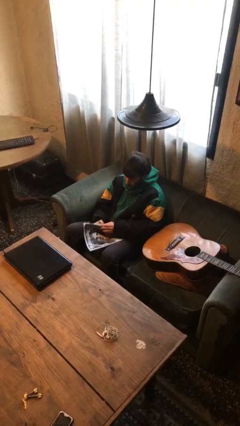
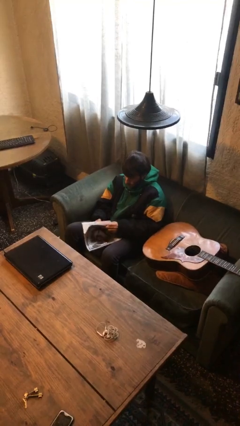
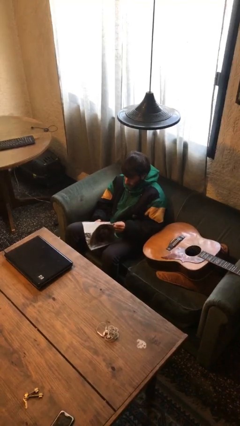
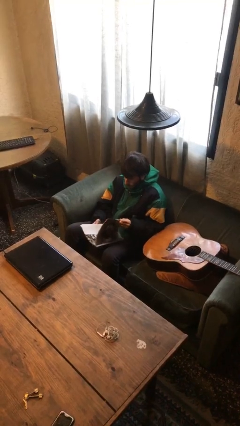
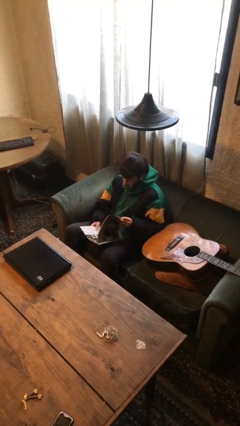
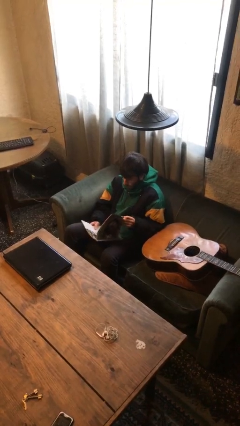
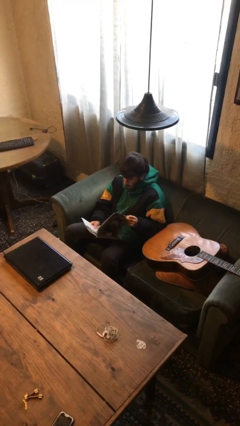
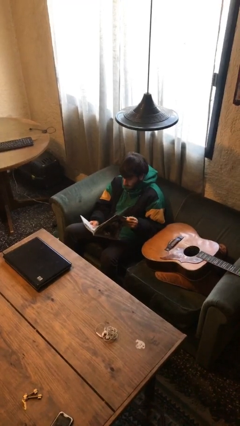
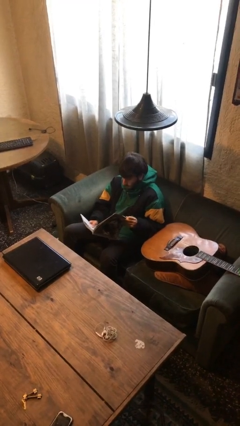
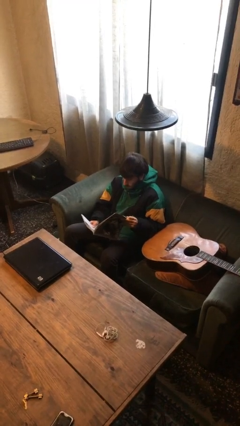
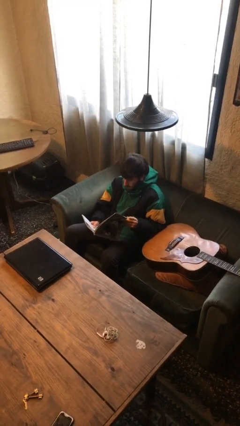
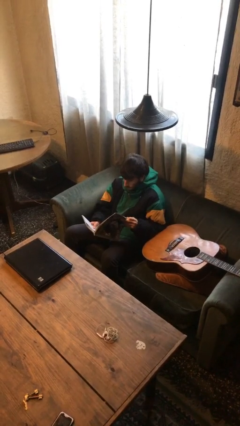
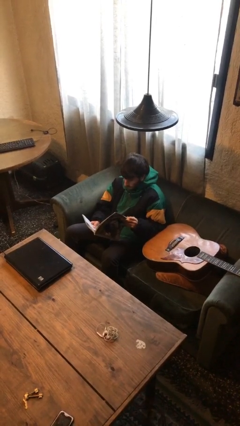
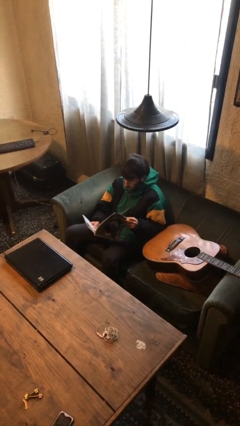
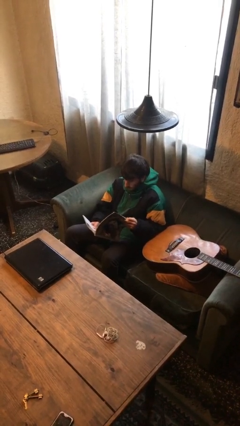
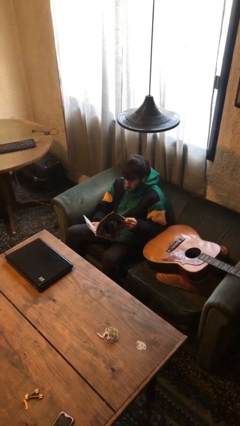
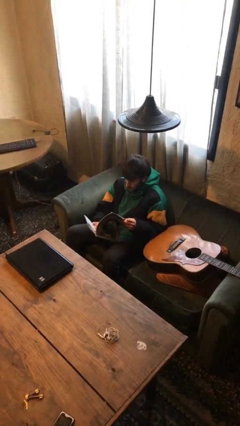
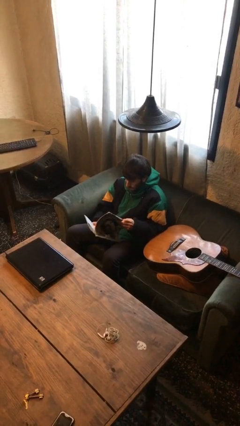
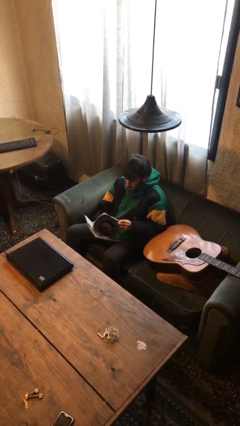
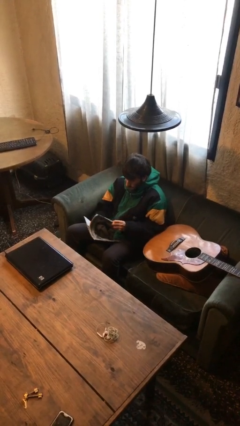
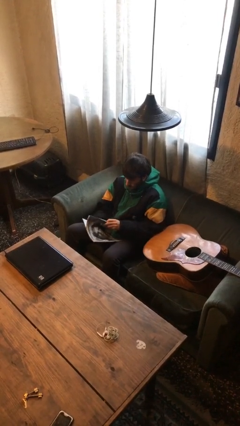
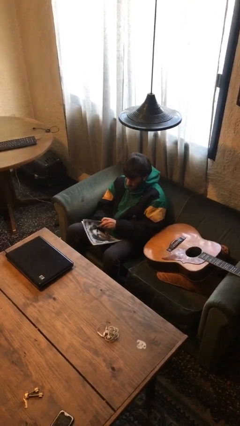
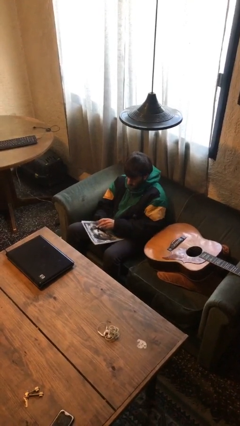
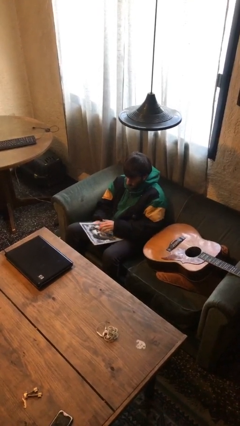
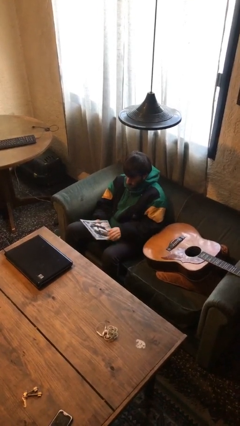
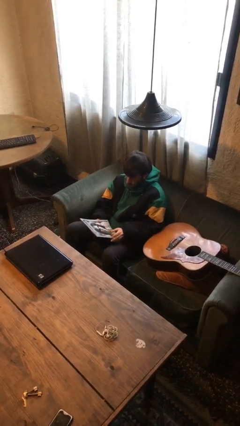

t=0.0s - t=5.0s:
person reads magazine

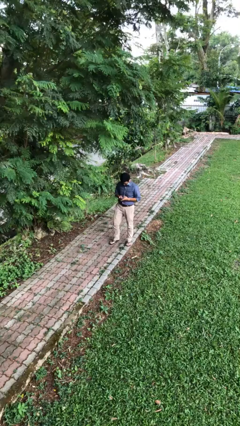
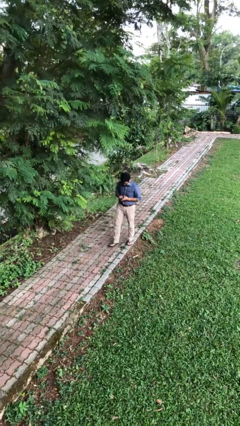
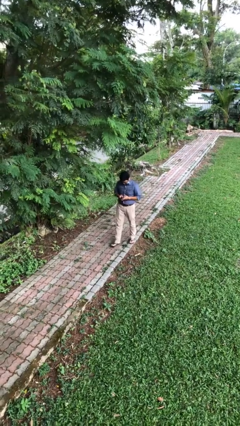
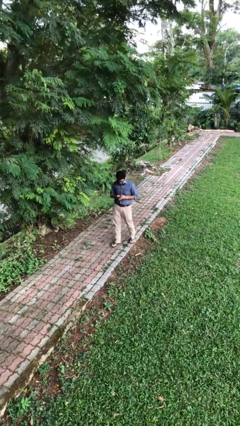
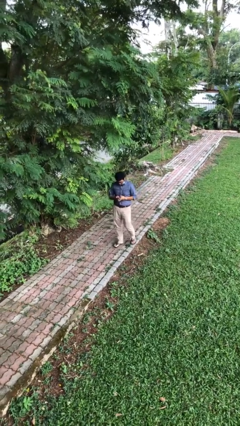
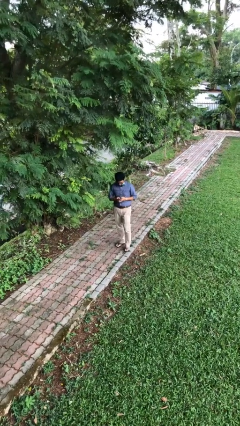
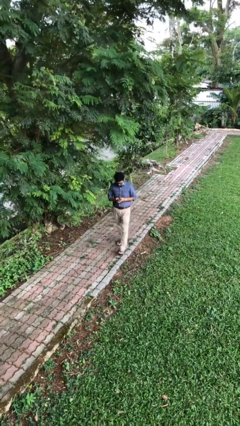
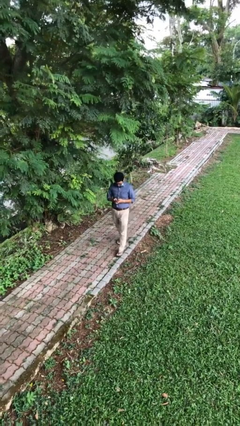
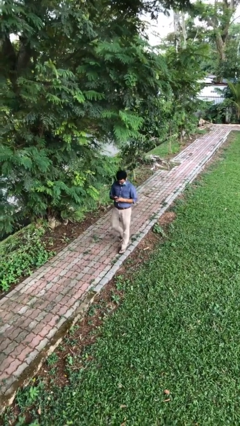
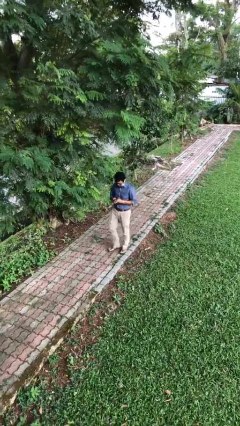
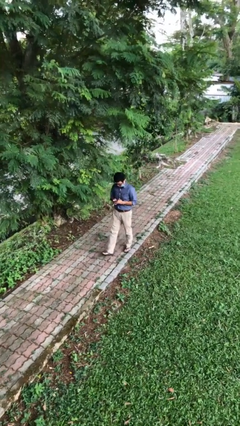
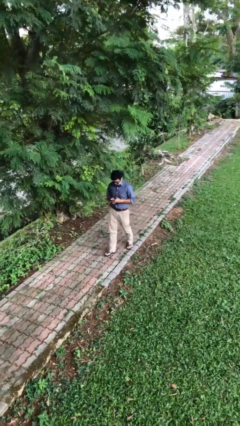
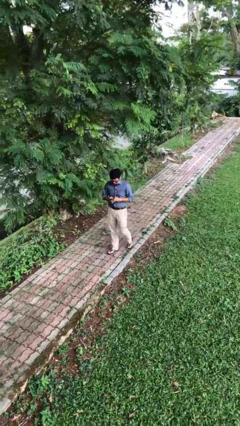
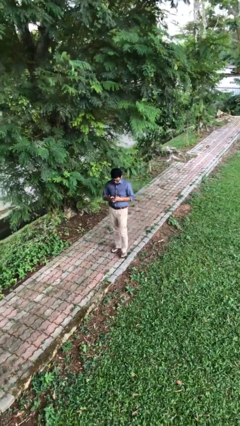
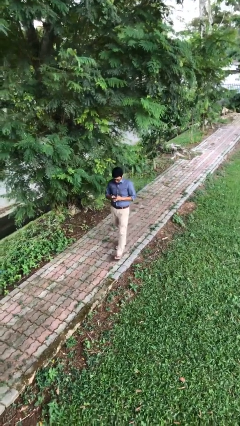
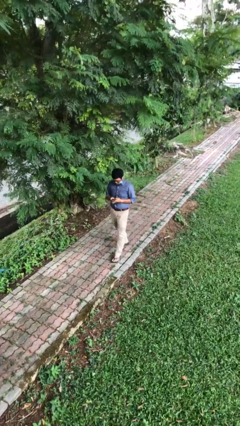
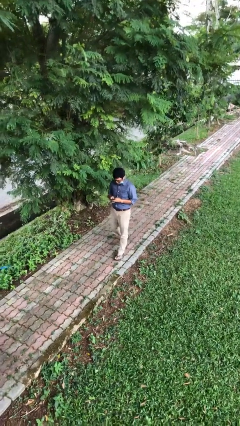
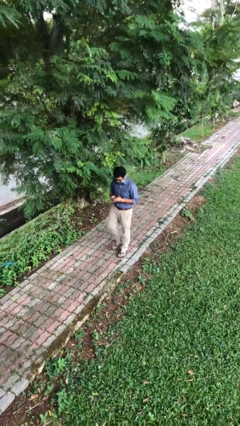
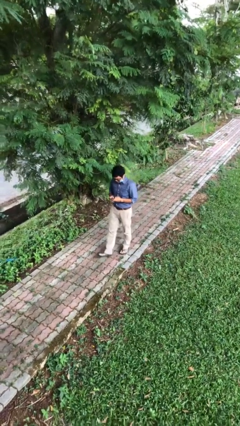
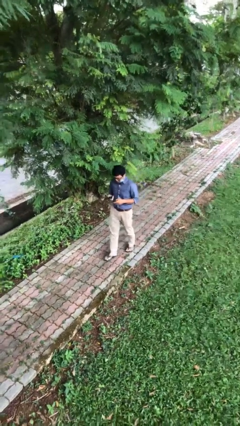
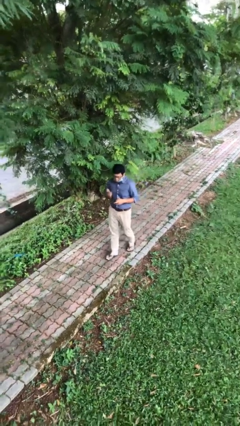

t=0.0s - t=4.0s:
person texts on phone

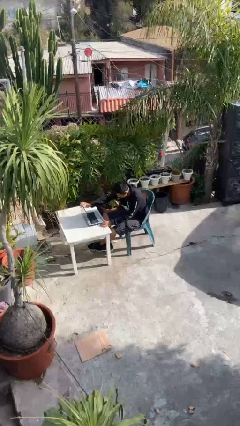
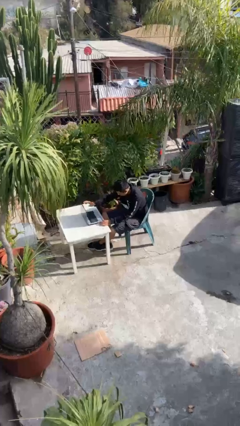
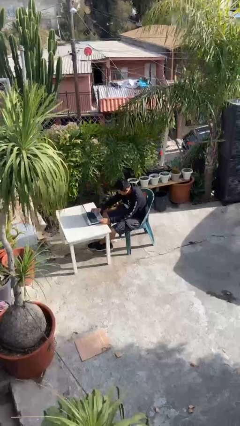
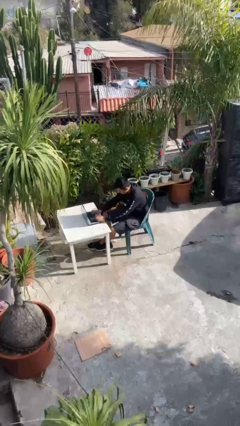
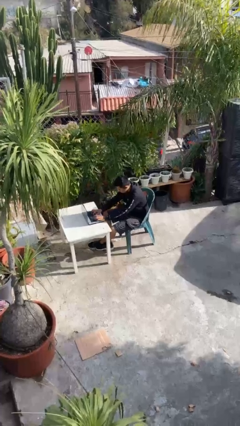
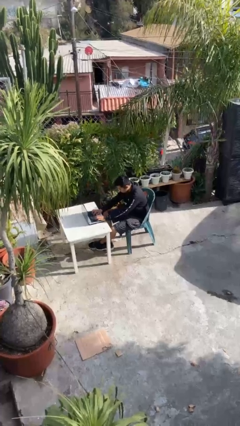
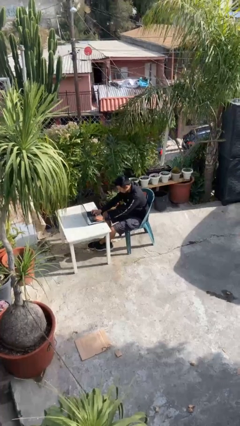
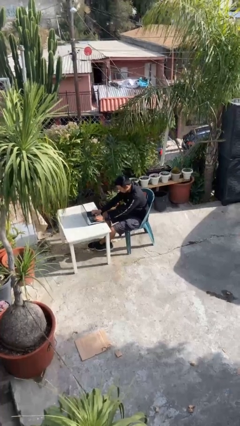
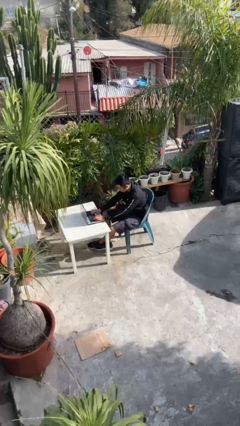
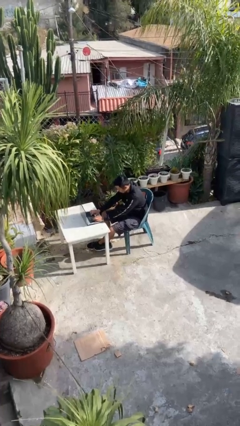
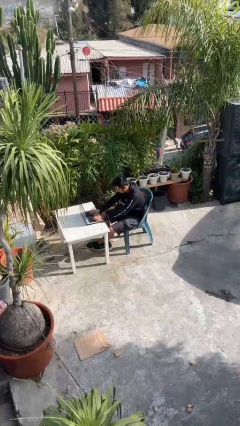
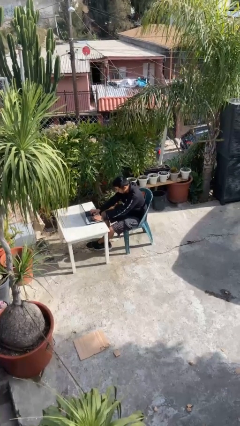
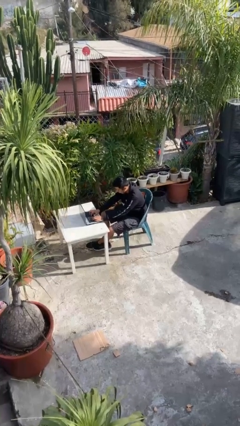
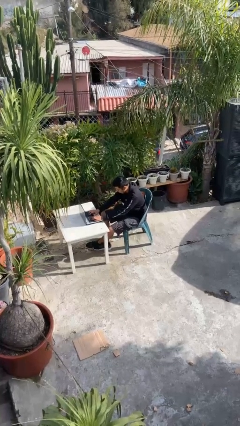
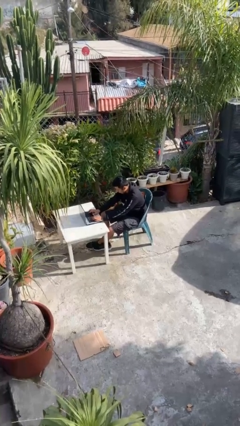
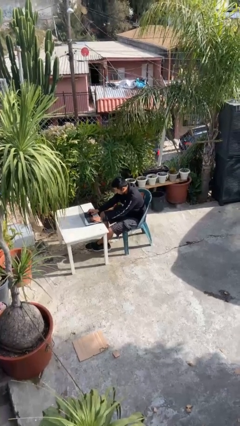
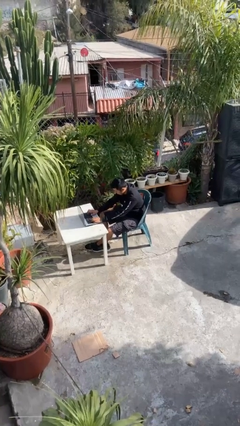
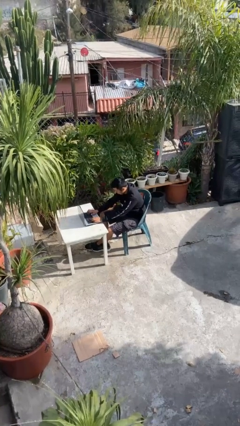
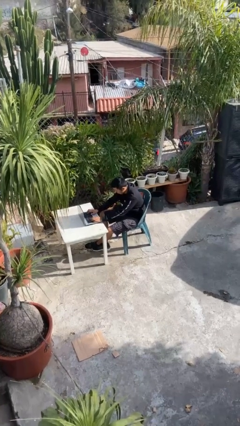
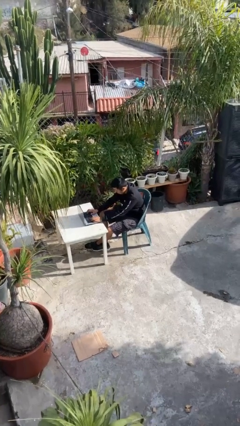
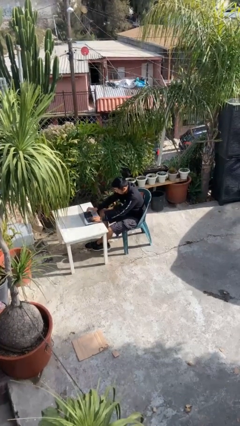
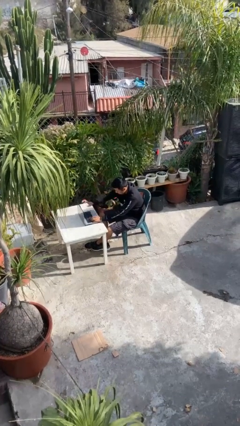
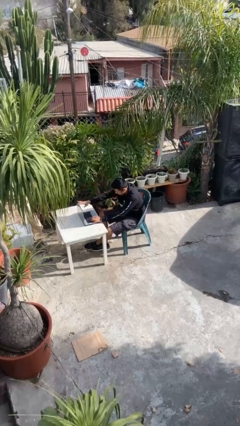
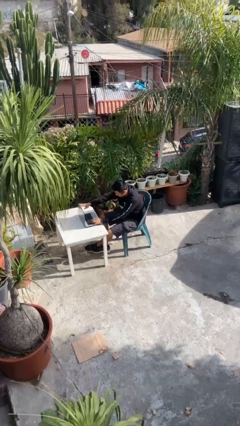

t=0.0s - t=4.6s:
person interacts with laptop

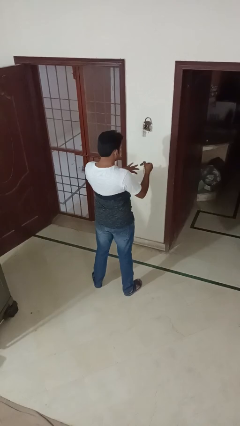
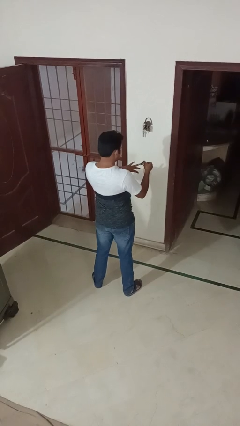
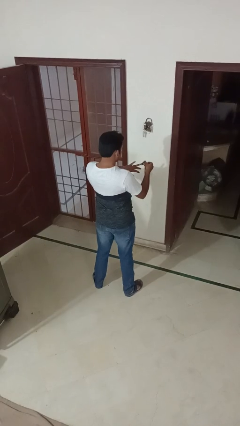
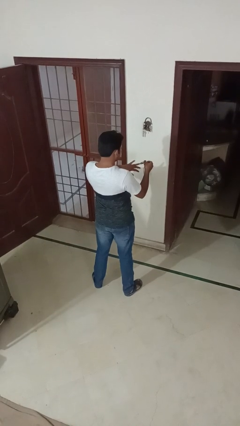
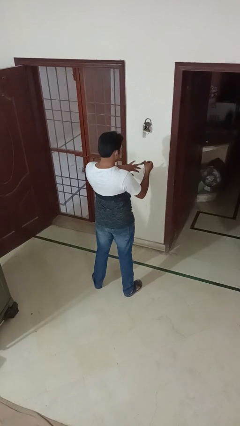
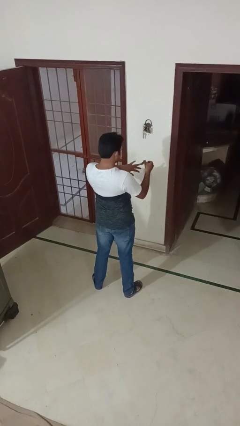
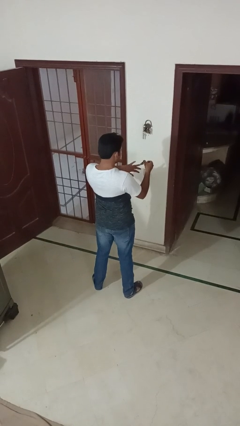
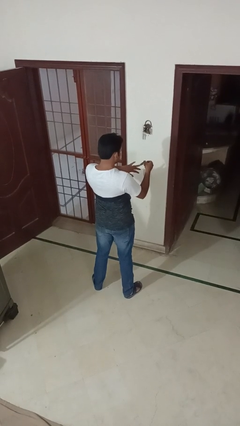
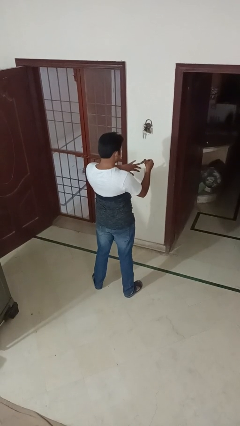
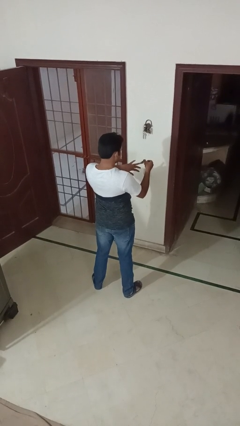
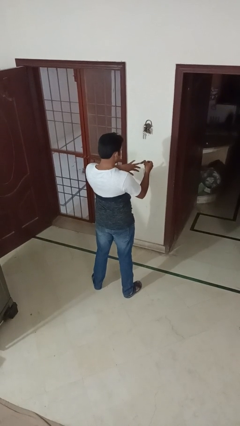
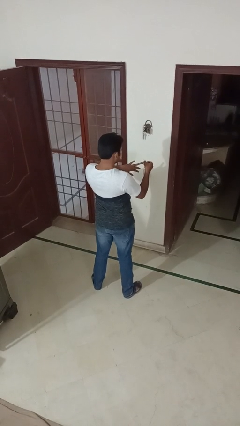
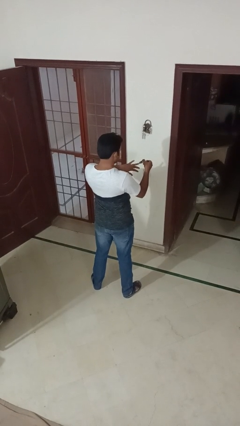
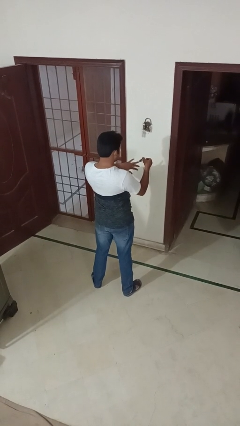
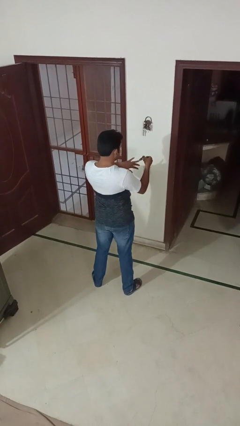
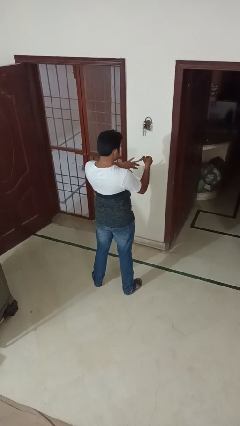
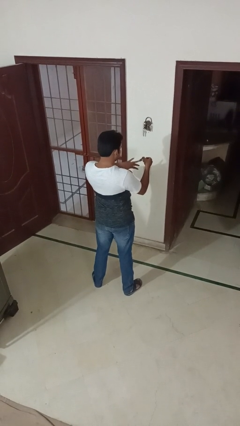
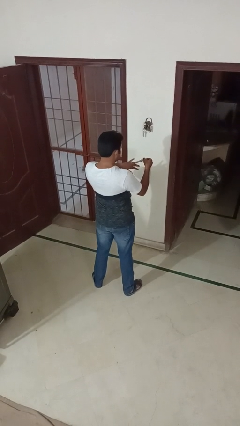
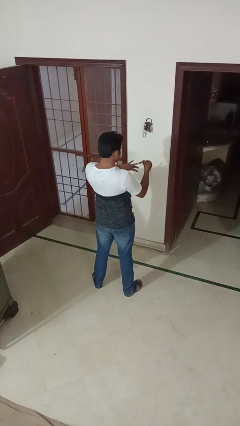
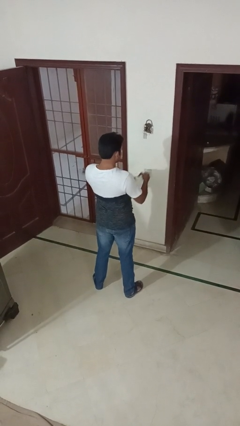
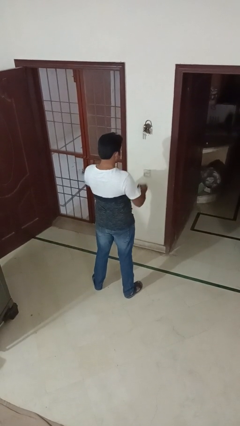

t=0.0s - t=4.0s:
person clips fingernails
